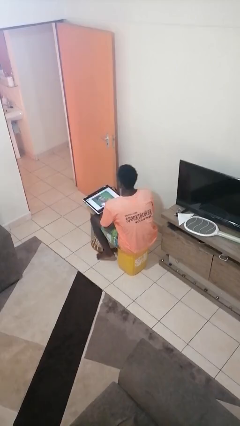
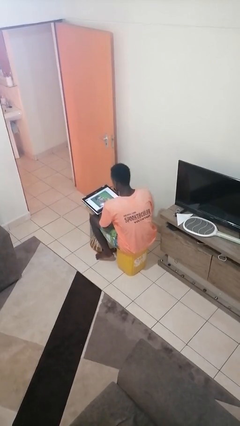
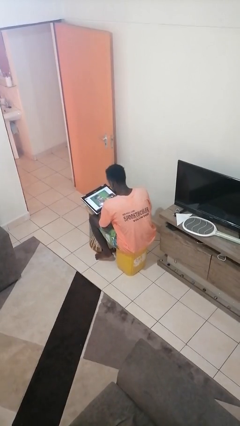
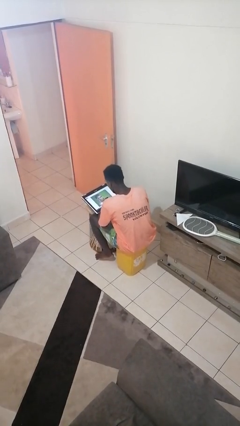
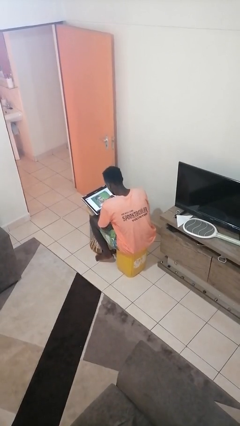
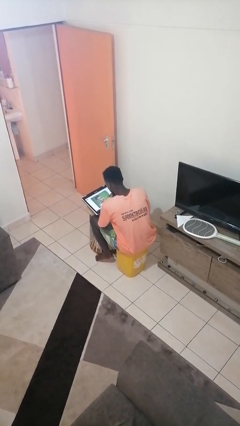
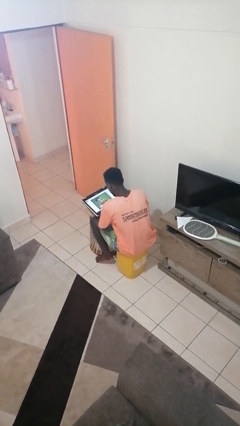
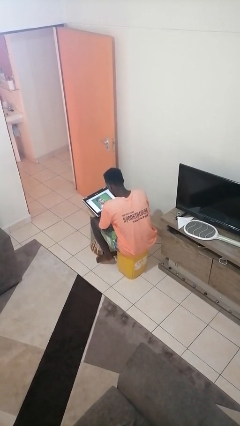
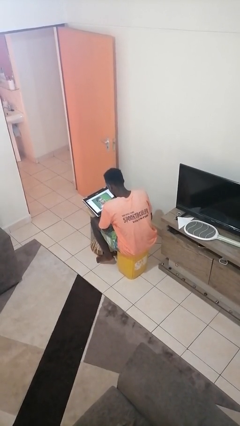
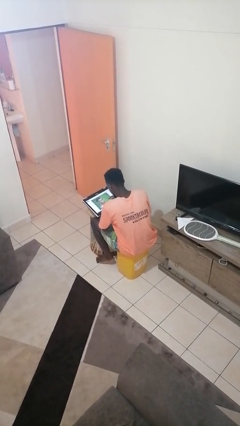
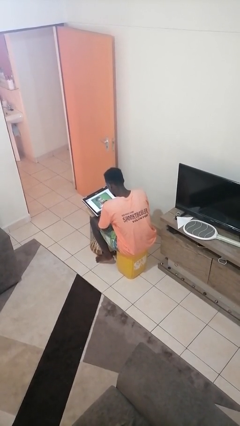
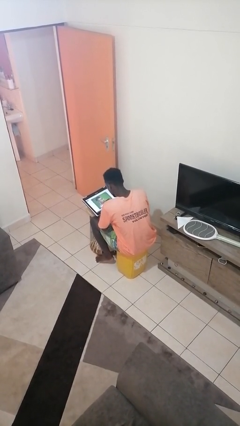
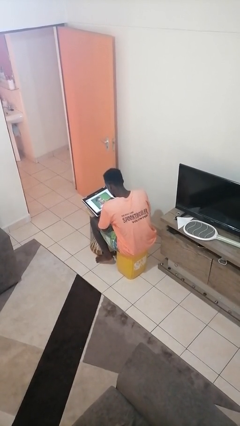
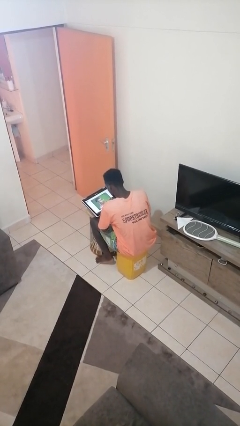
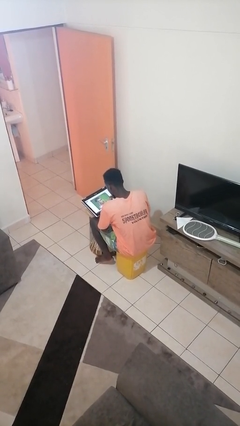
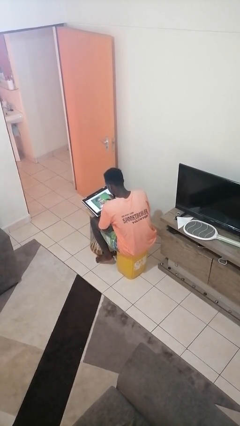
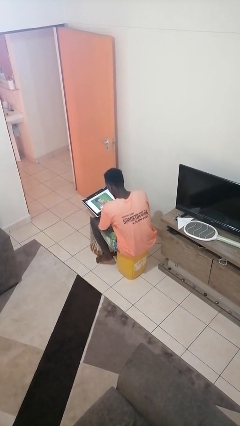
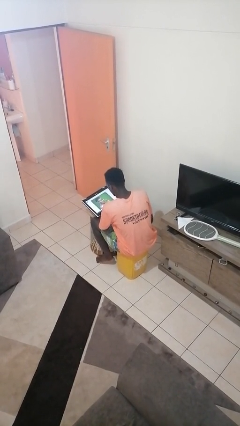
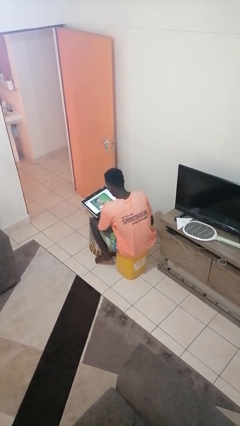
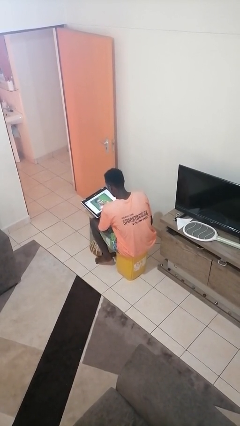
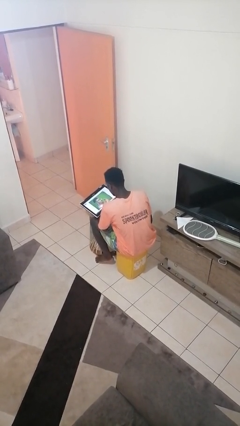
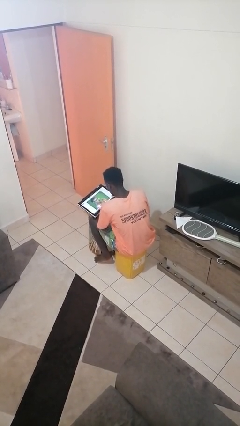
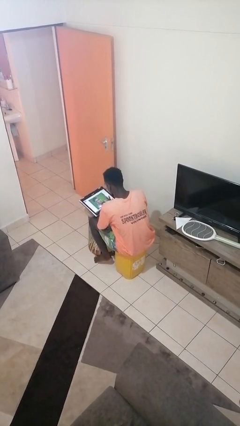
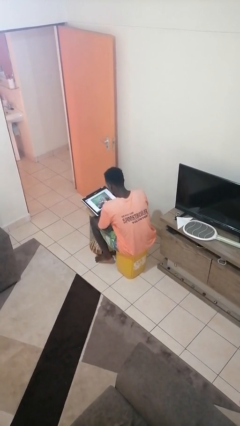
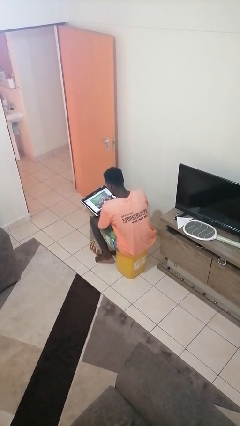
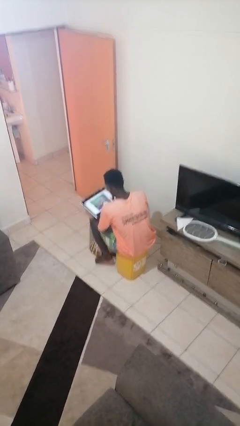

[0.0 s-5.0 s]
person interacts with tablet

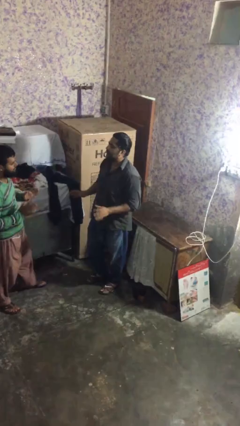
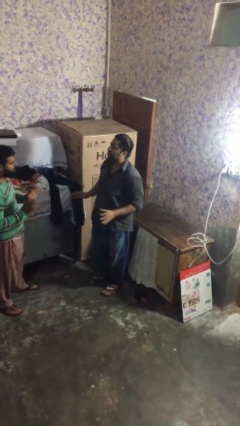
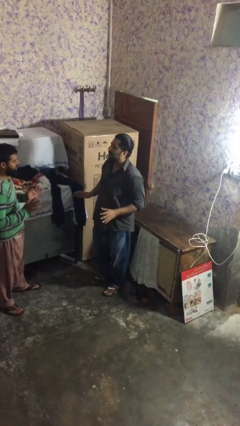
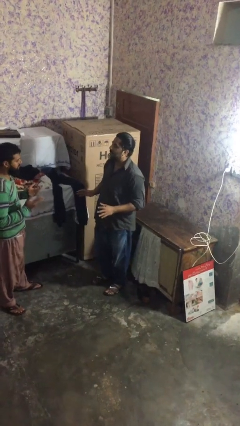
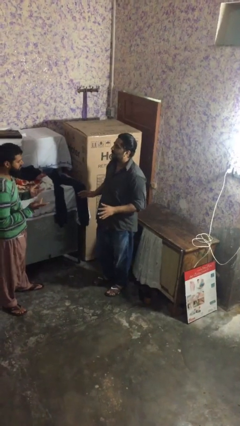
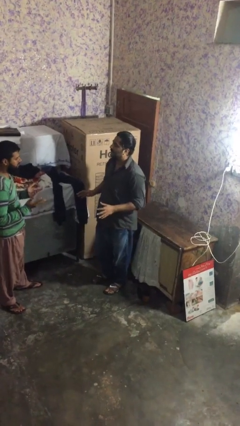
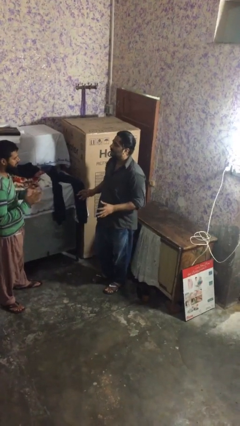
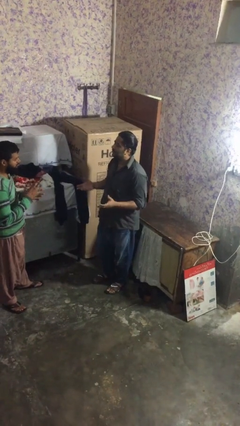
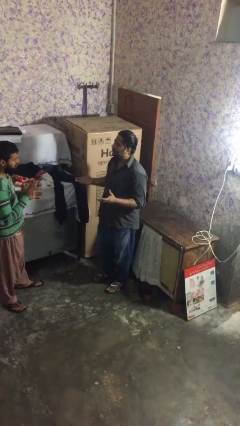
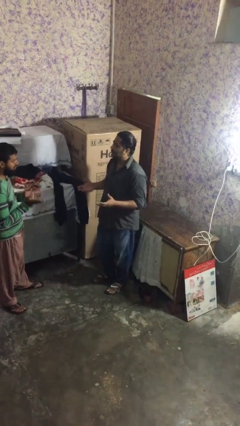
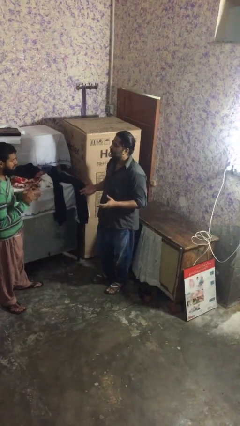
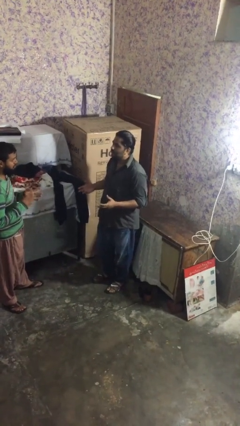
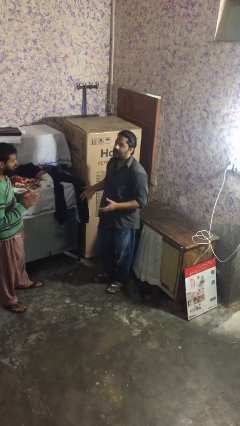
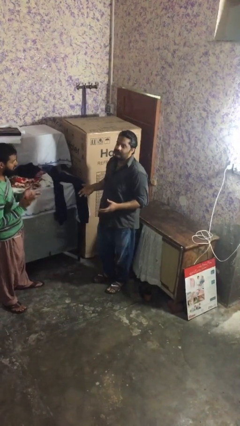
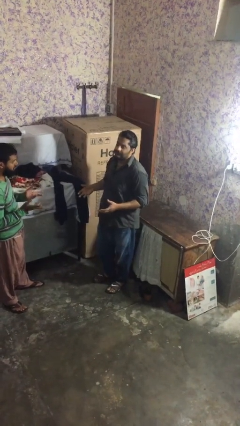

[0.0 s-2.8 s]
person talks to person

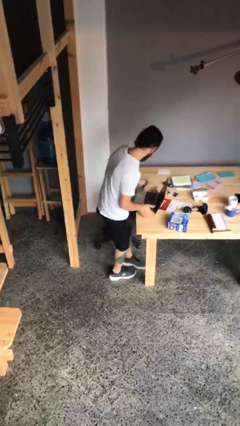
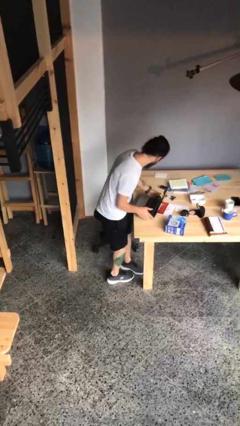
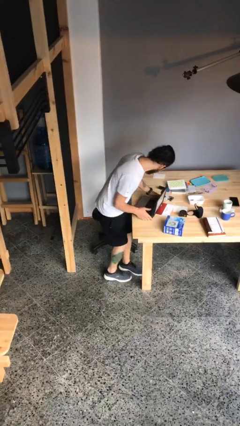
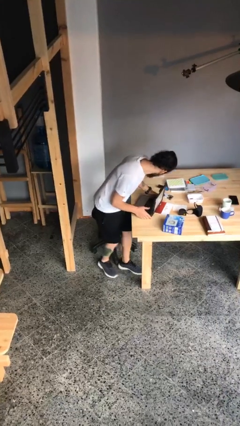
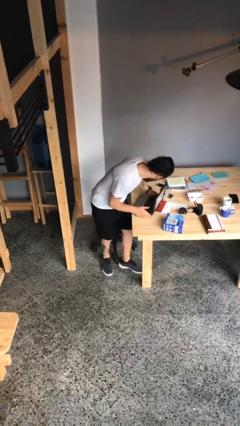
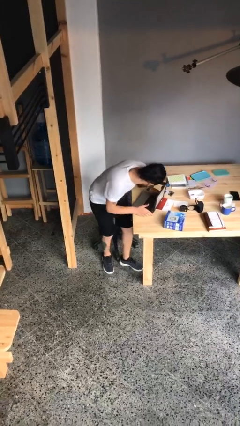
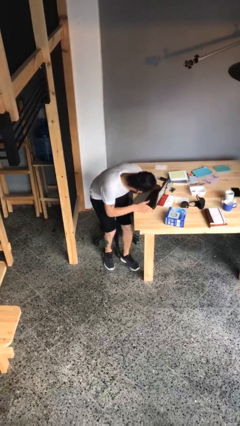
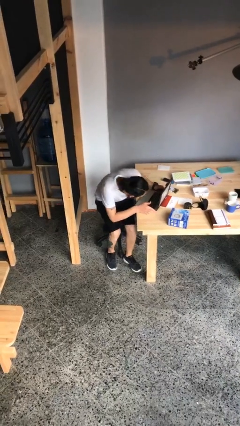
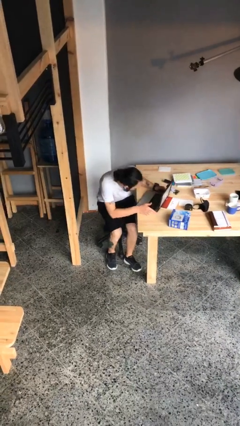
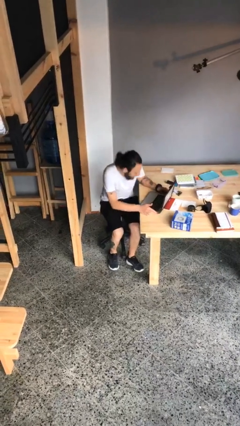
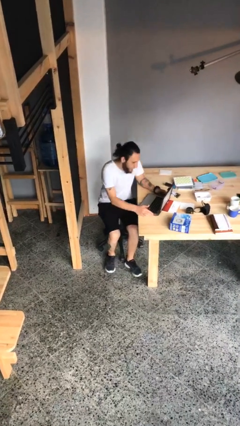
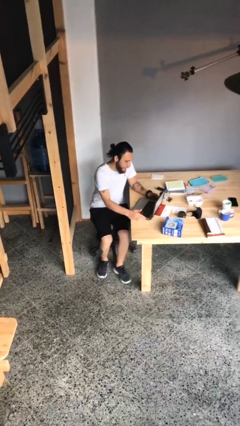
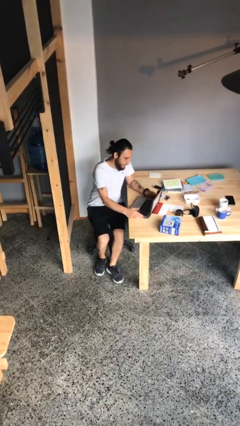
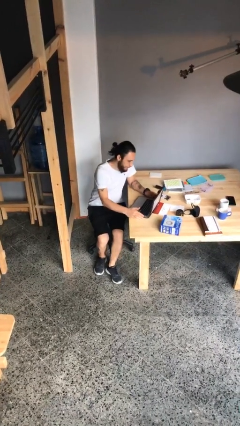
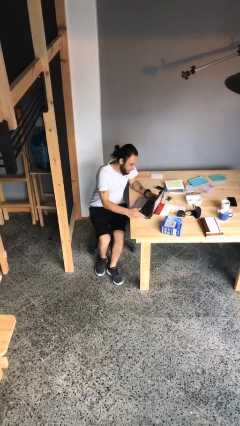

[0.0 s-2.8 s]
person sits down

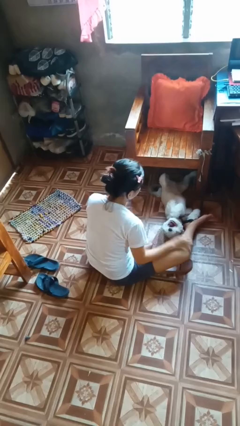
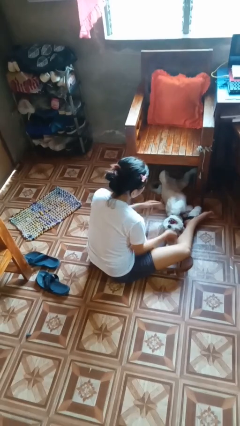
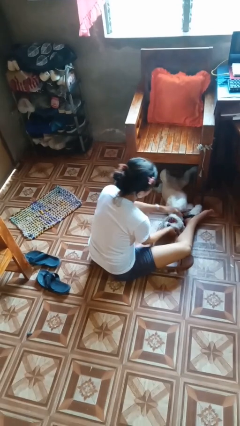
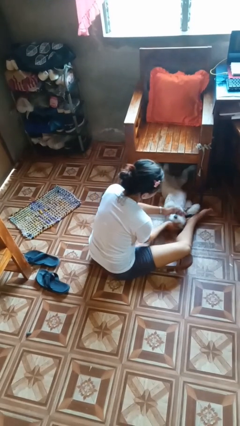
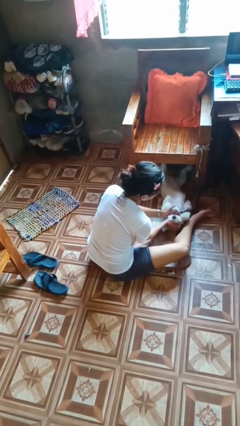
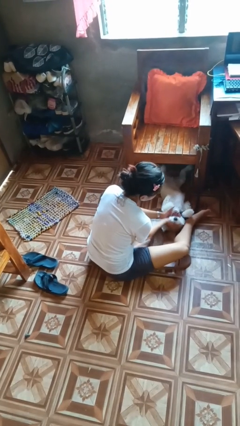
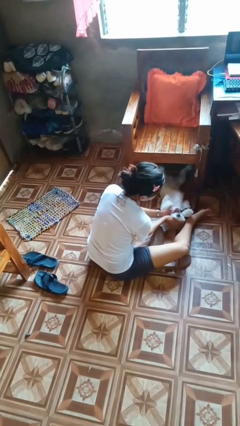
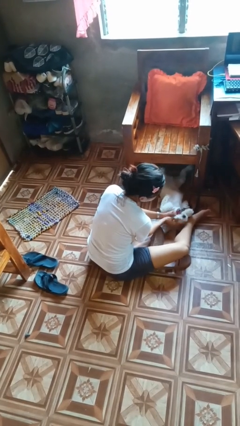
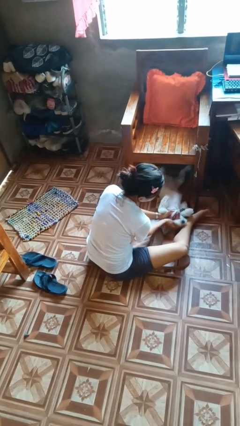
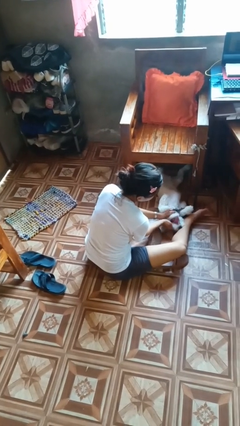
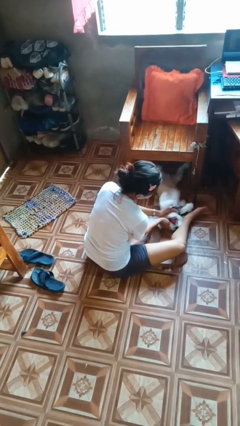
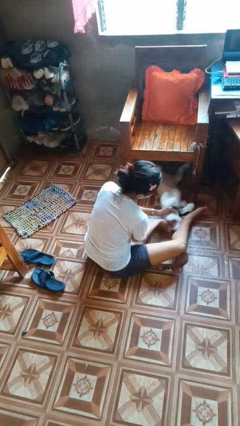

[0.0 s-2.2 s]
person pets dog

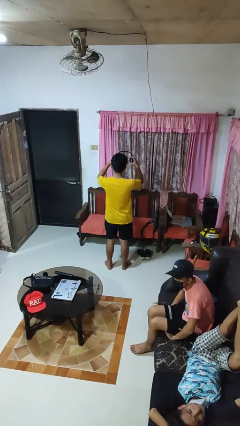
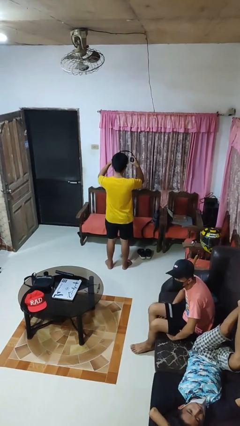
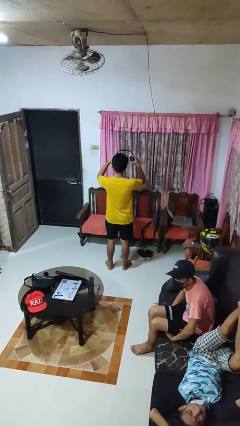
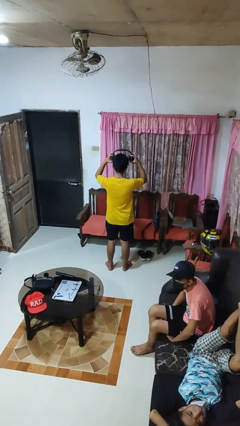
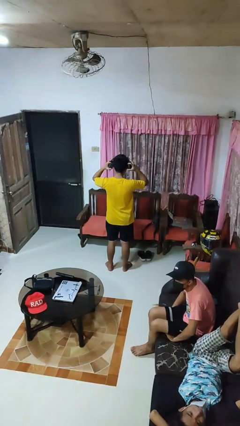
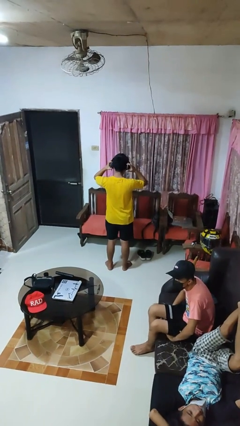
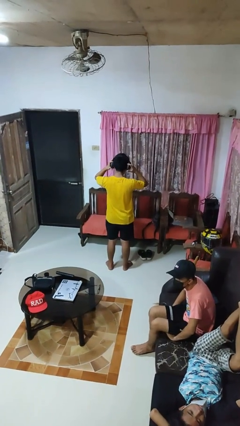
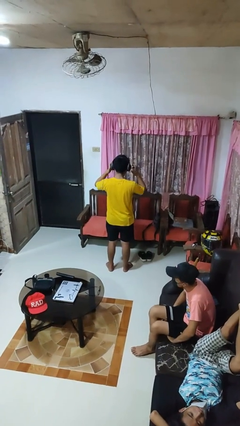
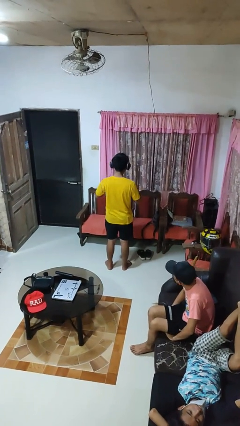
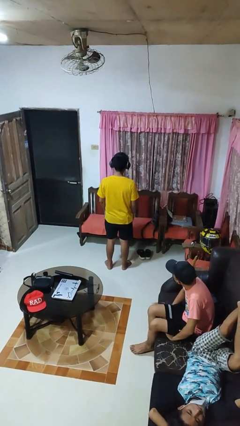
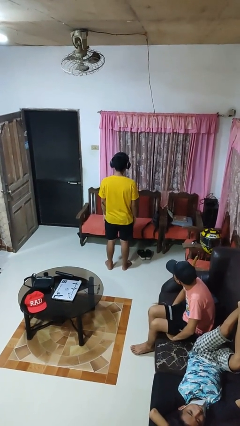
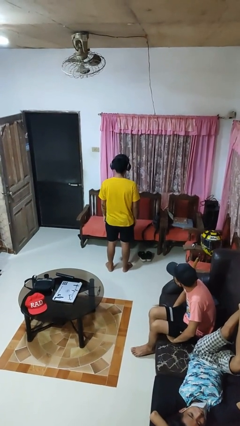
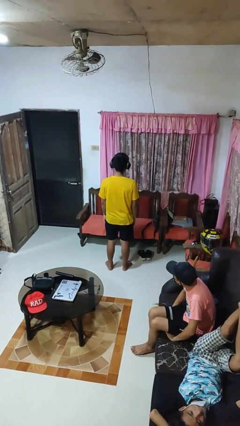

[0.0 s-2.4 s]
person puts on headphones

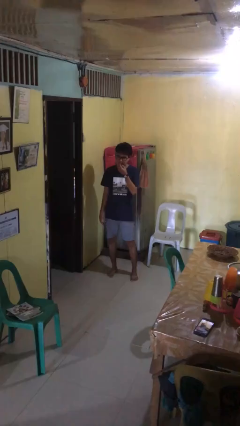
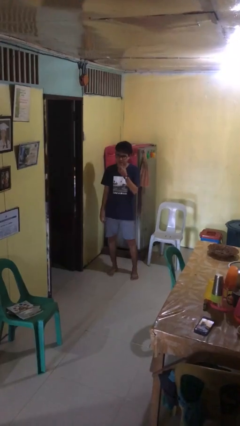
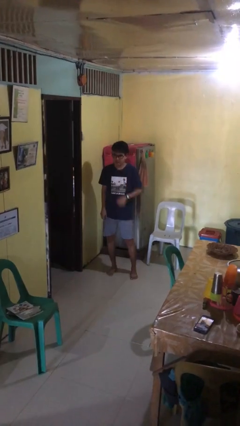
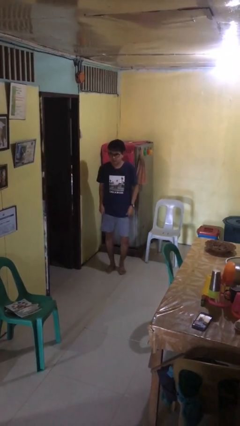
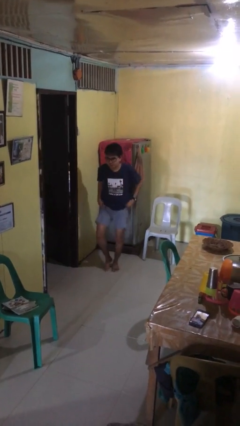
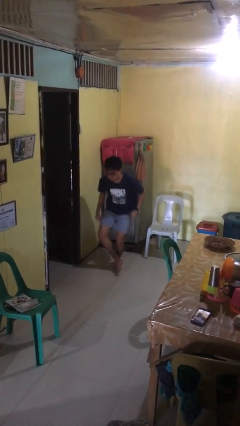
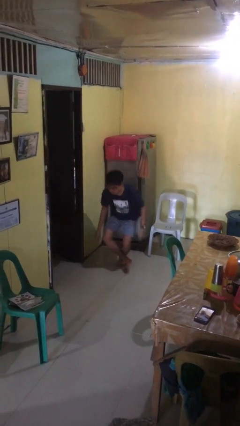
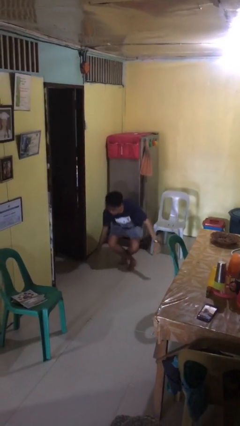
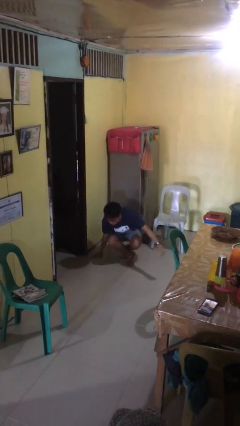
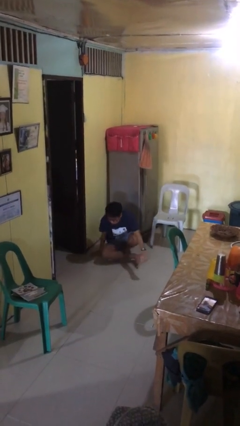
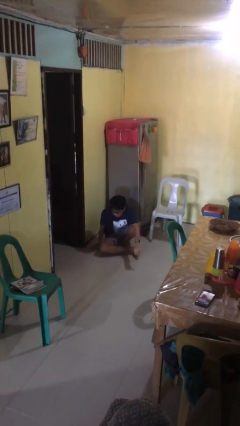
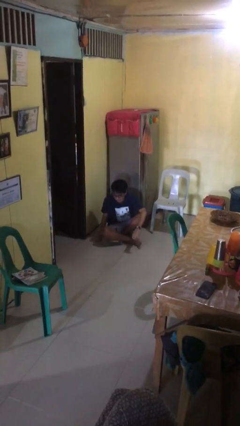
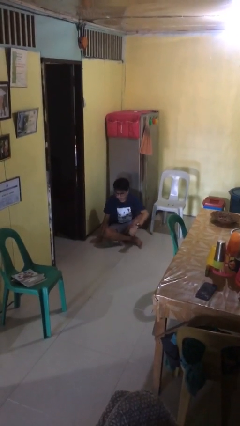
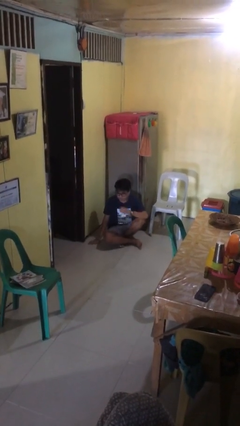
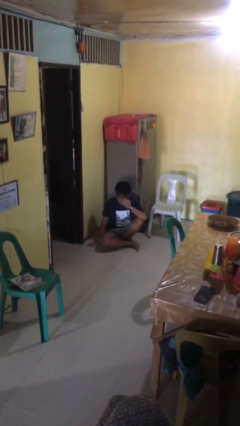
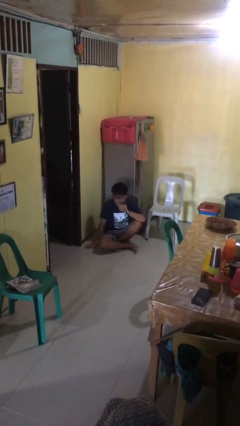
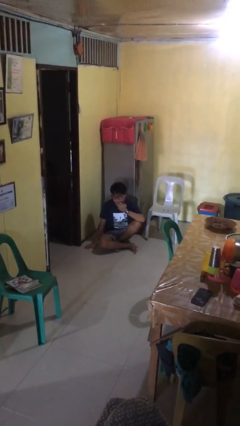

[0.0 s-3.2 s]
person sits crisscross
